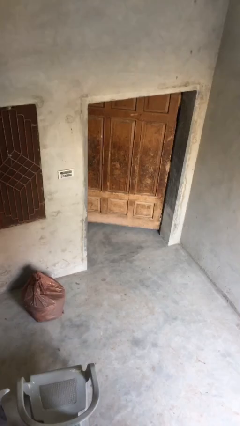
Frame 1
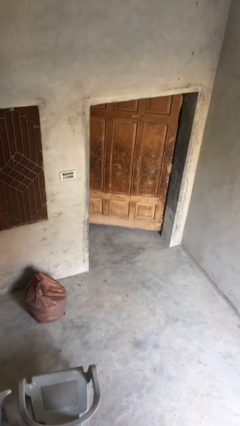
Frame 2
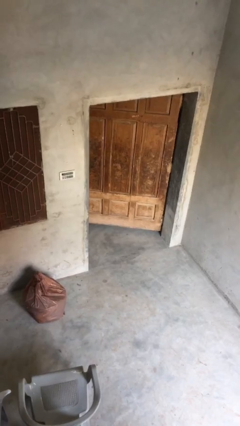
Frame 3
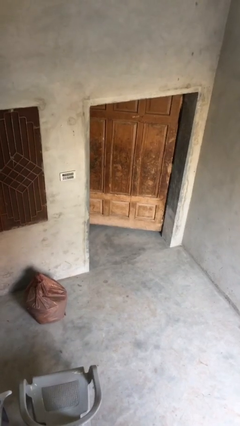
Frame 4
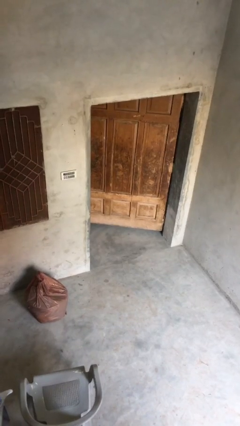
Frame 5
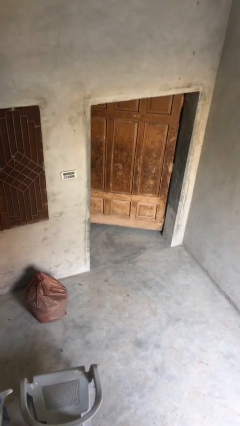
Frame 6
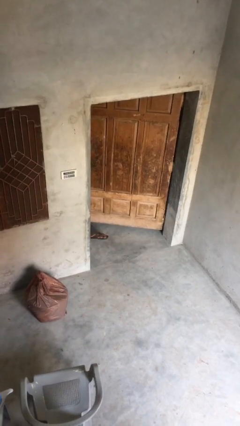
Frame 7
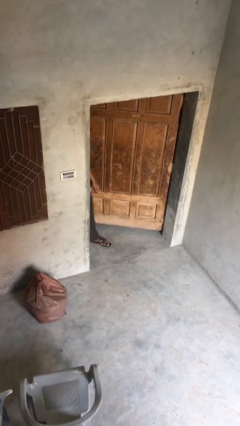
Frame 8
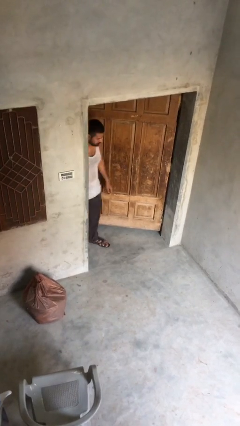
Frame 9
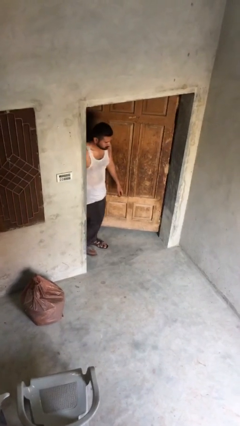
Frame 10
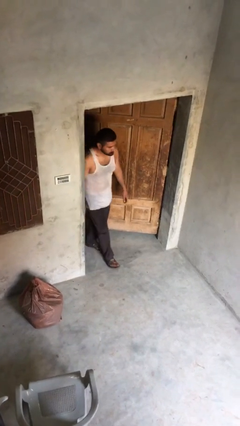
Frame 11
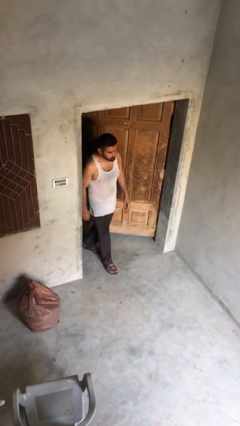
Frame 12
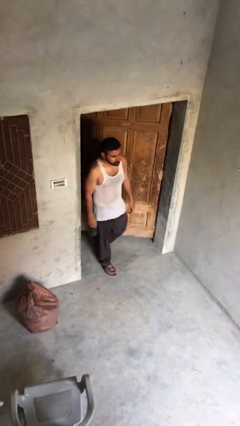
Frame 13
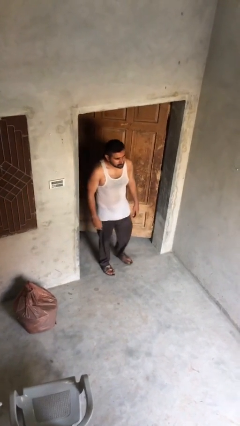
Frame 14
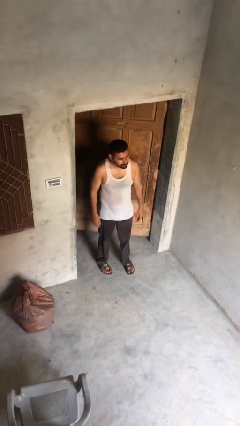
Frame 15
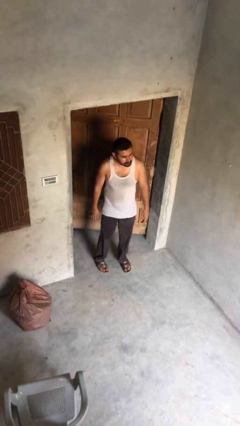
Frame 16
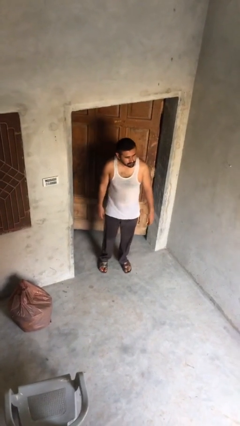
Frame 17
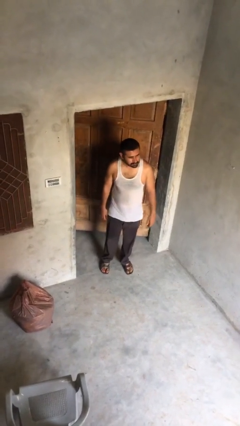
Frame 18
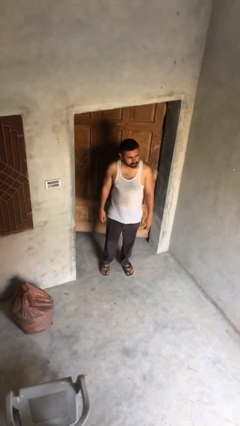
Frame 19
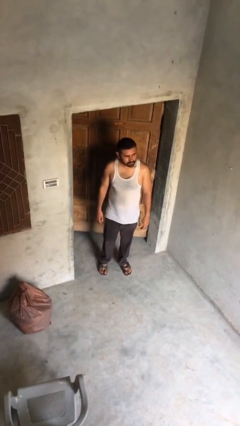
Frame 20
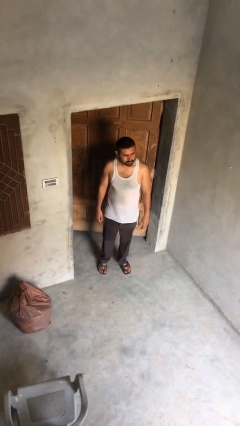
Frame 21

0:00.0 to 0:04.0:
person enters scene through structure

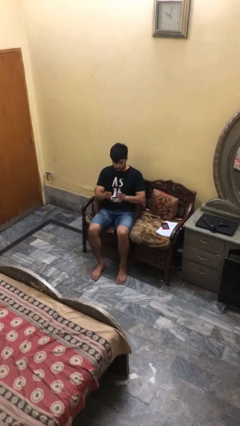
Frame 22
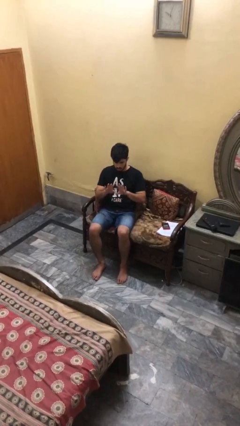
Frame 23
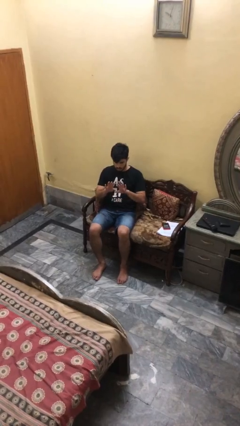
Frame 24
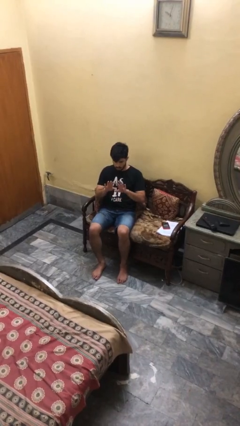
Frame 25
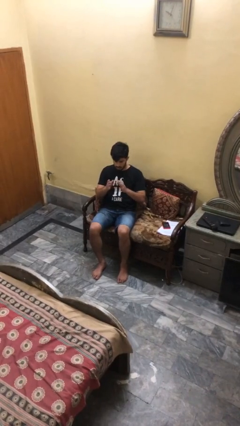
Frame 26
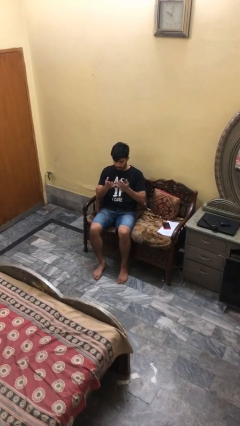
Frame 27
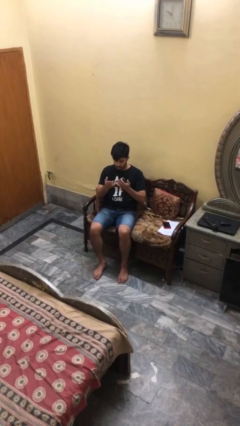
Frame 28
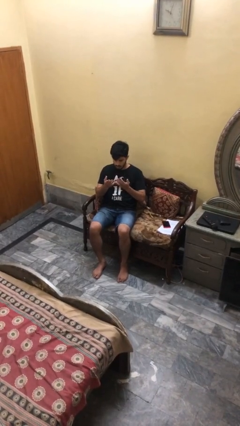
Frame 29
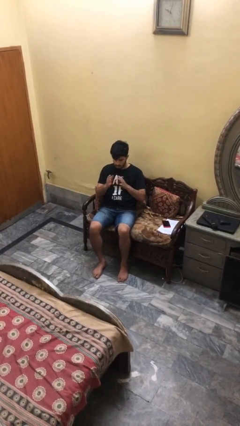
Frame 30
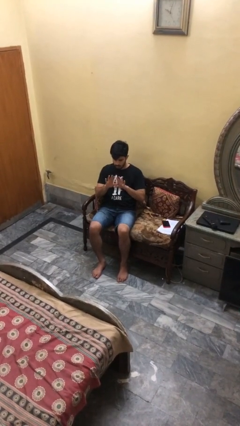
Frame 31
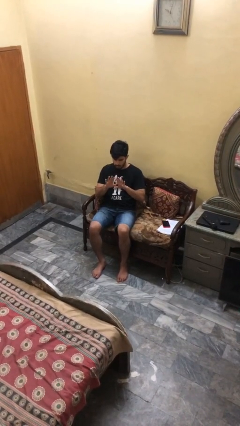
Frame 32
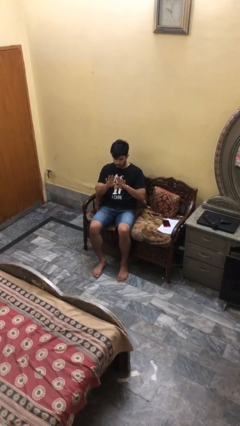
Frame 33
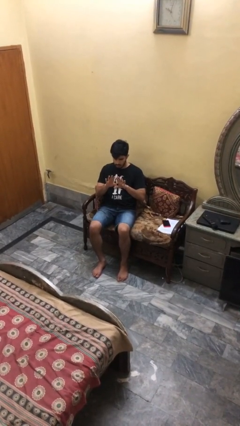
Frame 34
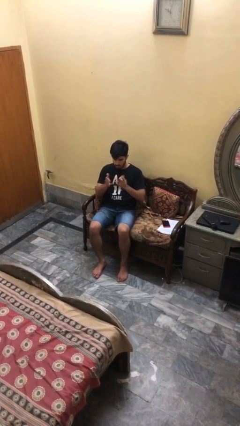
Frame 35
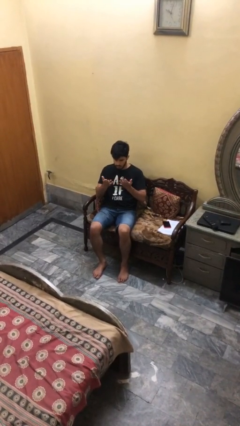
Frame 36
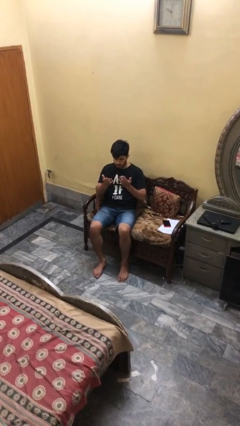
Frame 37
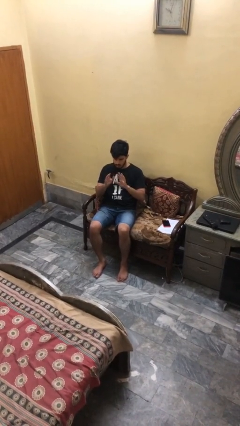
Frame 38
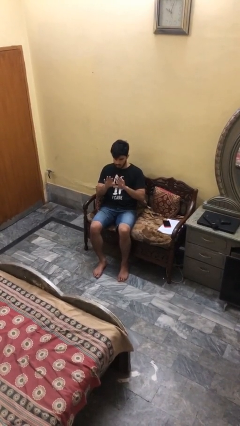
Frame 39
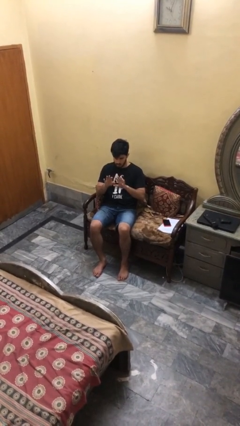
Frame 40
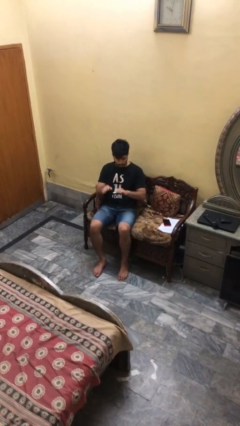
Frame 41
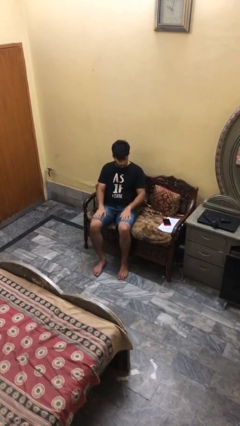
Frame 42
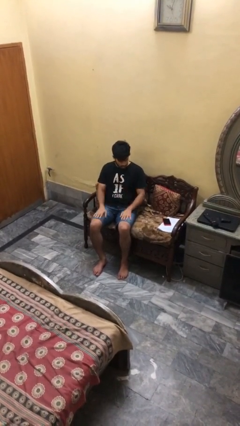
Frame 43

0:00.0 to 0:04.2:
person looks at hands in lap

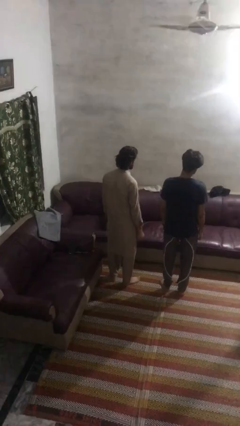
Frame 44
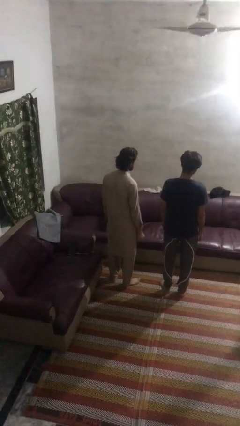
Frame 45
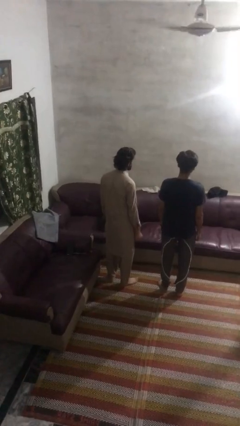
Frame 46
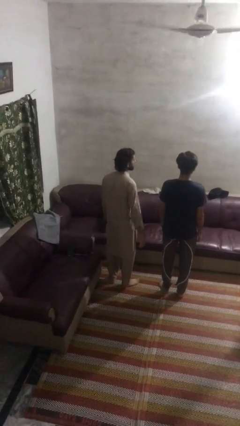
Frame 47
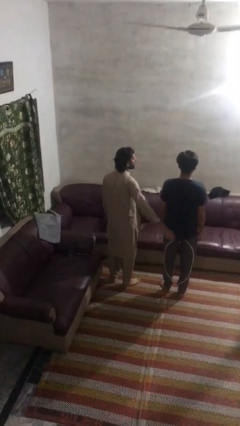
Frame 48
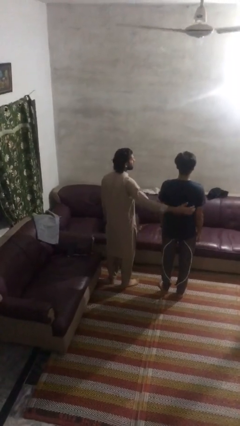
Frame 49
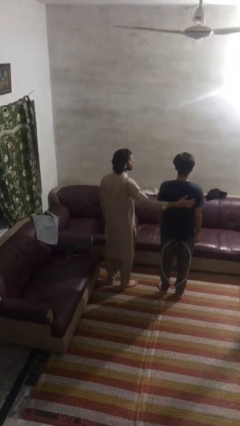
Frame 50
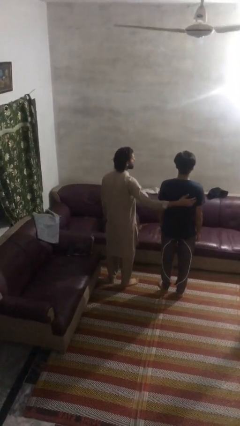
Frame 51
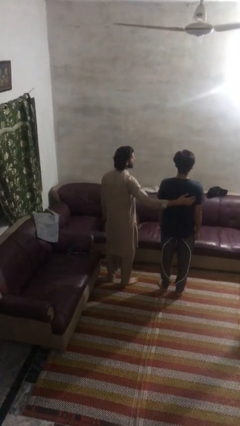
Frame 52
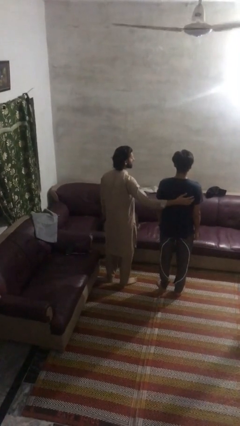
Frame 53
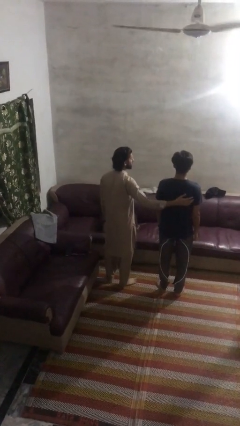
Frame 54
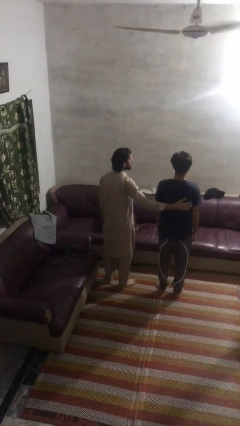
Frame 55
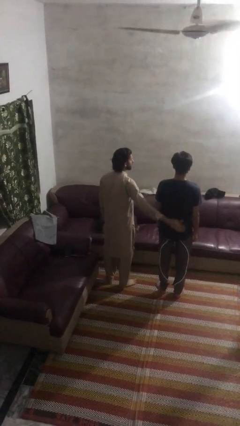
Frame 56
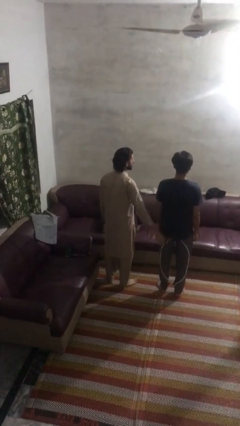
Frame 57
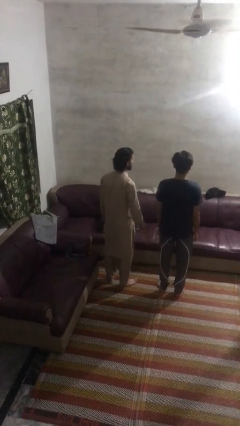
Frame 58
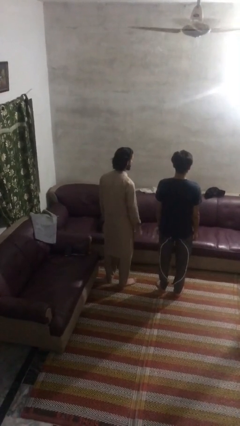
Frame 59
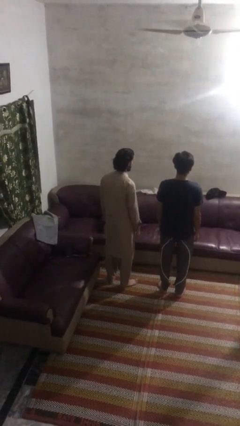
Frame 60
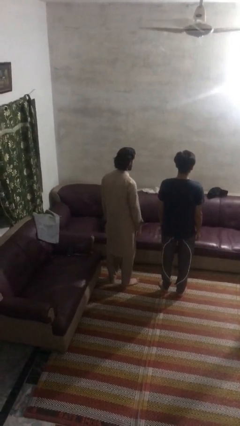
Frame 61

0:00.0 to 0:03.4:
person touches back of person

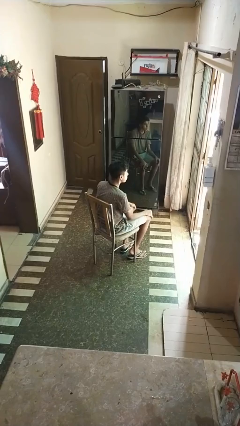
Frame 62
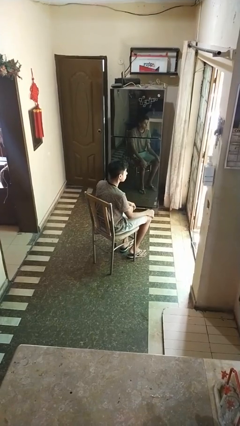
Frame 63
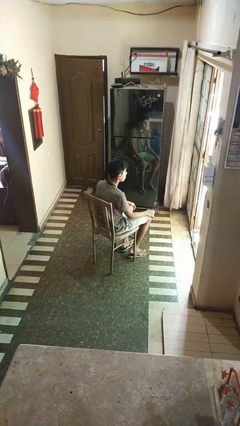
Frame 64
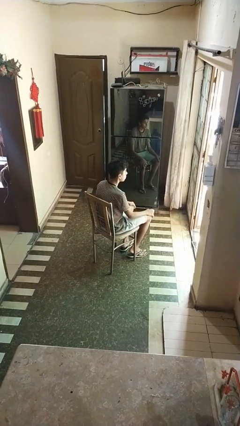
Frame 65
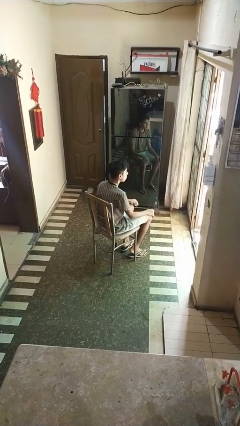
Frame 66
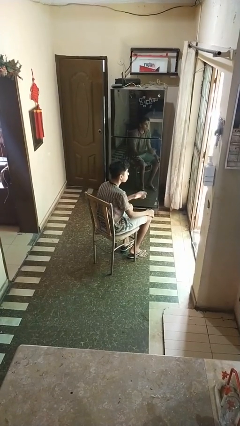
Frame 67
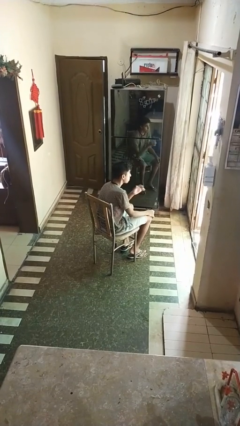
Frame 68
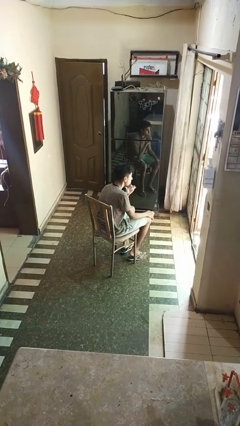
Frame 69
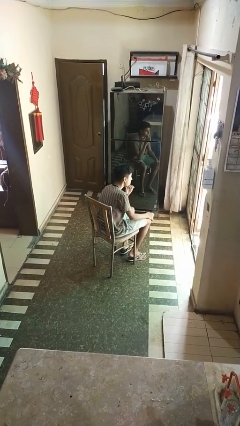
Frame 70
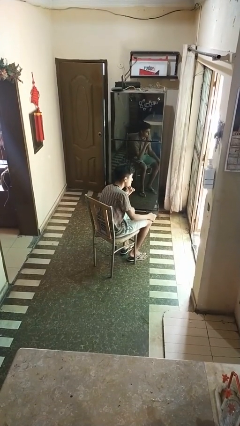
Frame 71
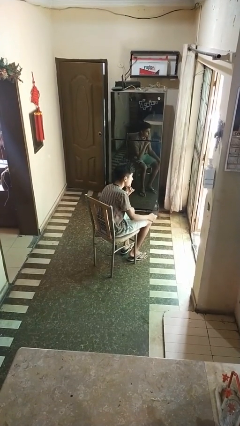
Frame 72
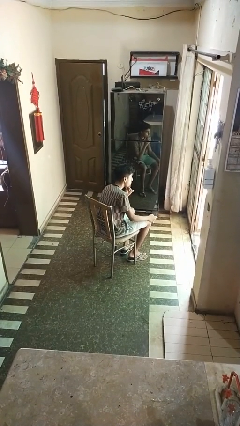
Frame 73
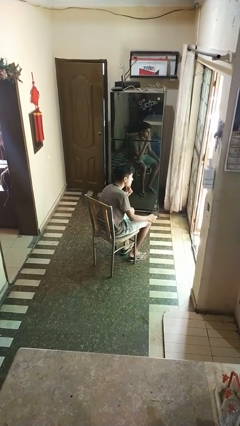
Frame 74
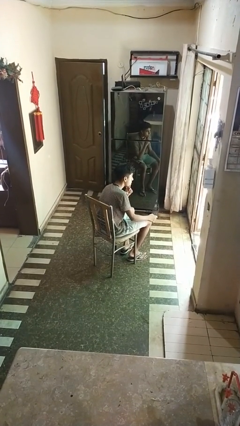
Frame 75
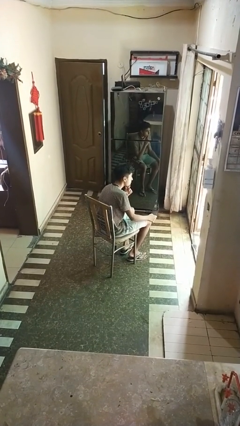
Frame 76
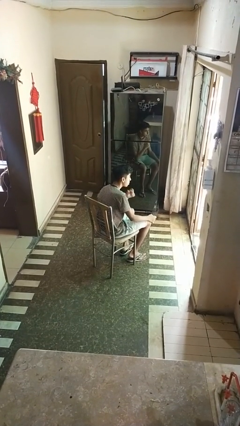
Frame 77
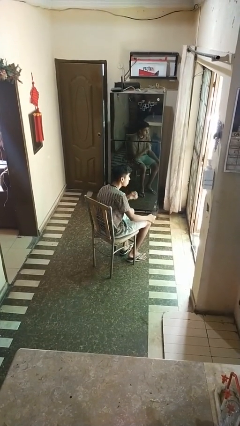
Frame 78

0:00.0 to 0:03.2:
person strokes chin

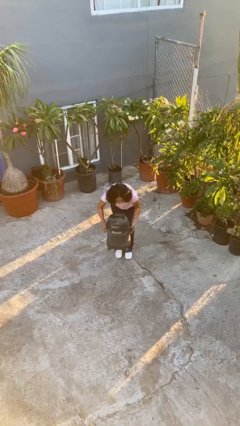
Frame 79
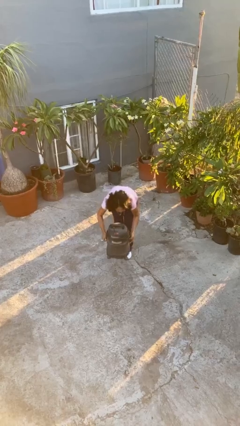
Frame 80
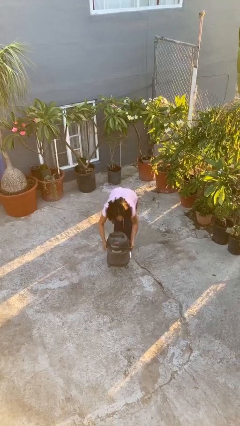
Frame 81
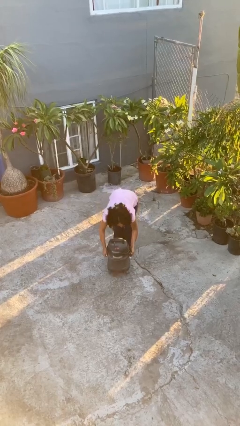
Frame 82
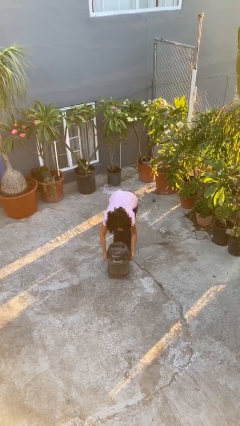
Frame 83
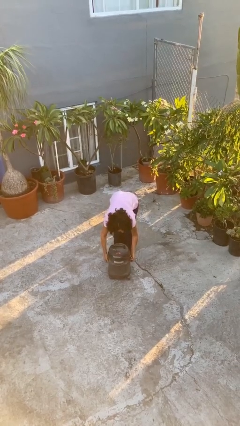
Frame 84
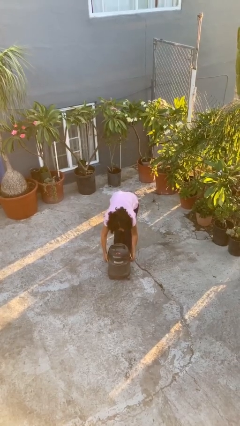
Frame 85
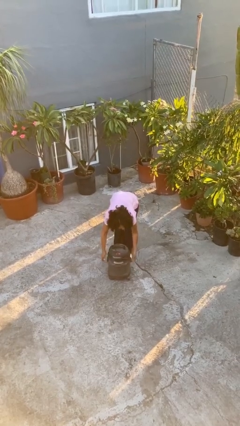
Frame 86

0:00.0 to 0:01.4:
person puts down object on floor

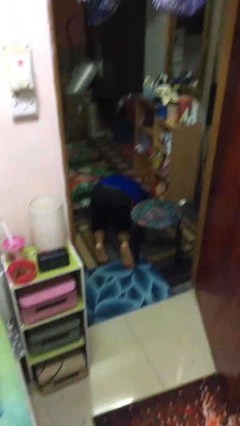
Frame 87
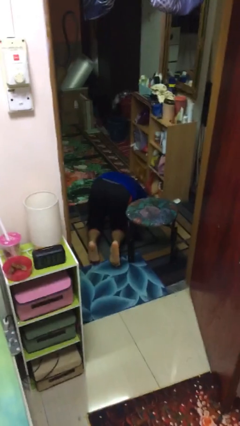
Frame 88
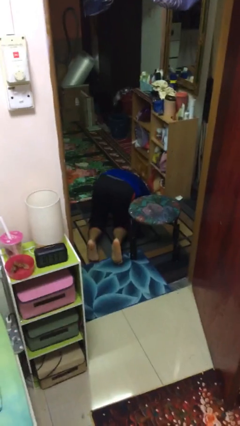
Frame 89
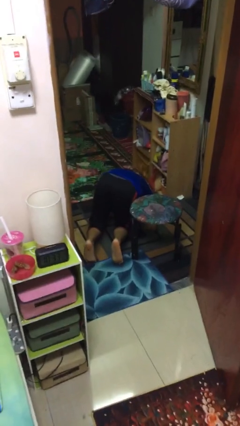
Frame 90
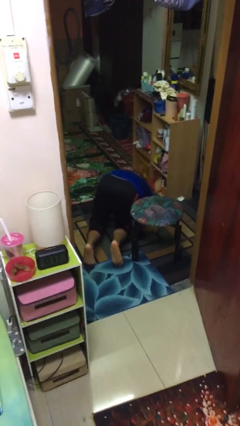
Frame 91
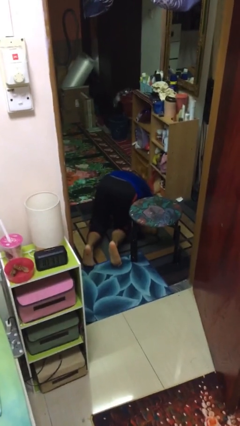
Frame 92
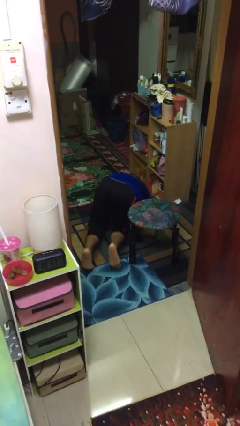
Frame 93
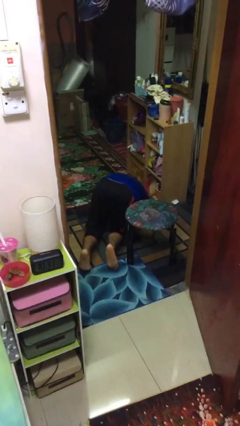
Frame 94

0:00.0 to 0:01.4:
person lies down on floor
